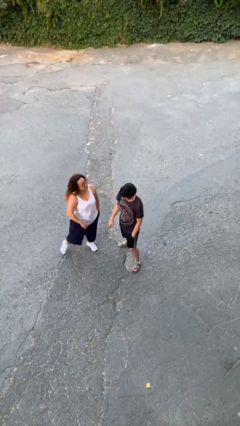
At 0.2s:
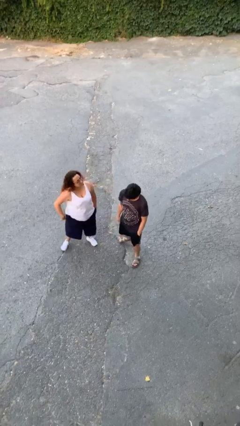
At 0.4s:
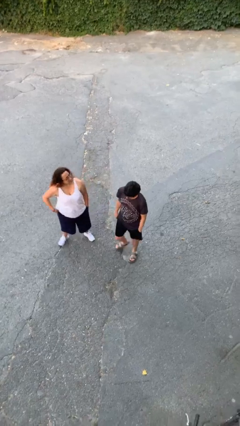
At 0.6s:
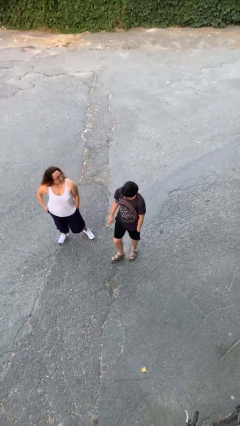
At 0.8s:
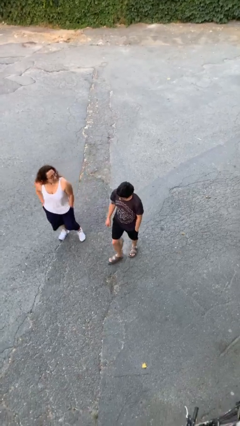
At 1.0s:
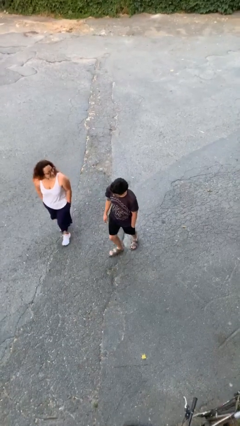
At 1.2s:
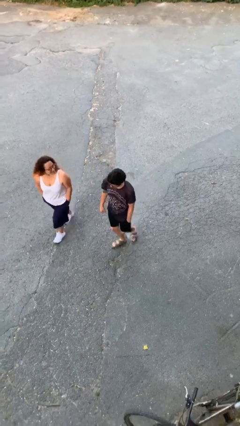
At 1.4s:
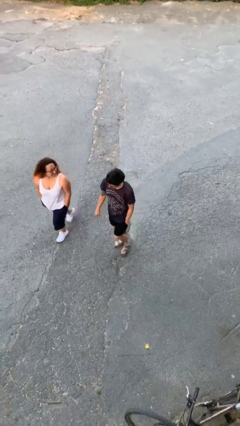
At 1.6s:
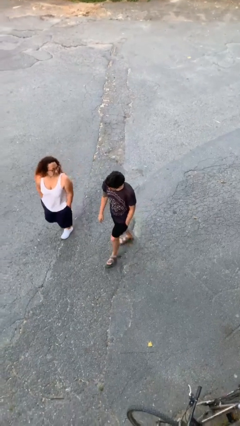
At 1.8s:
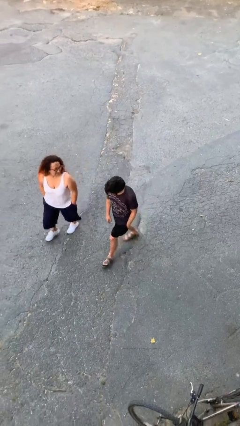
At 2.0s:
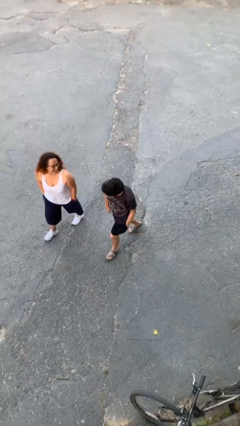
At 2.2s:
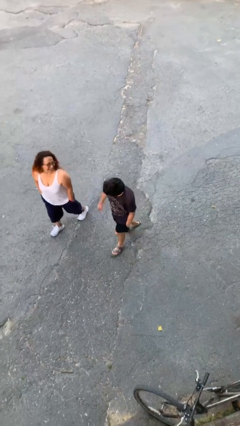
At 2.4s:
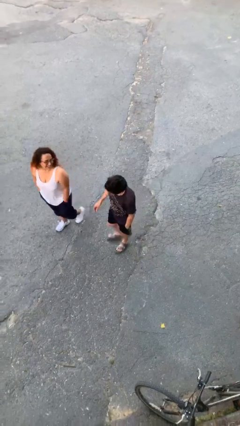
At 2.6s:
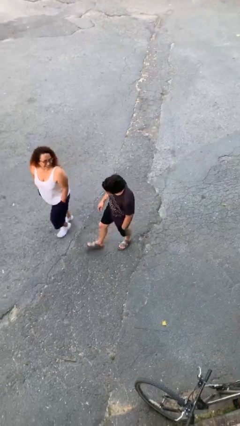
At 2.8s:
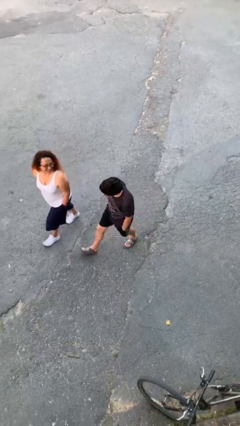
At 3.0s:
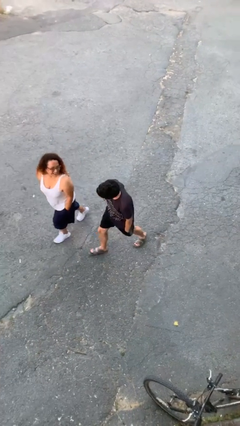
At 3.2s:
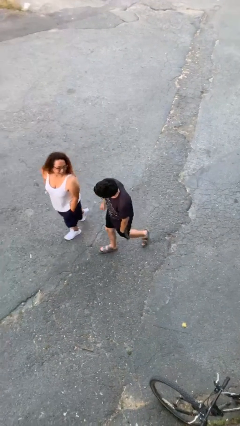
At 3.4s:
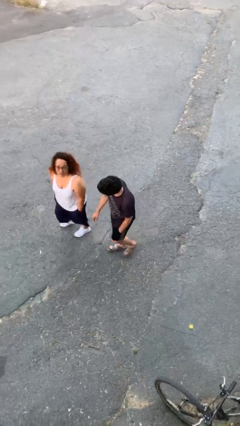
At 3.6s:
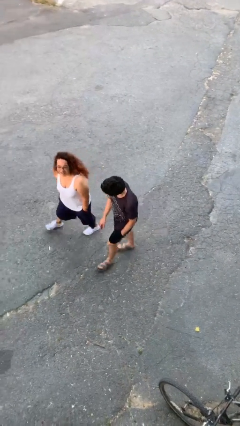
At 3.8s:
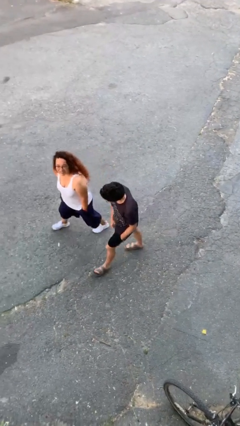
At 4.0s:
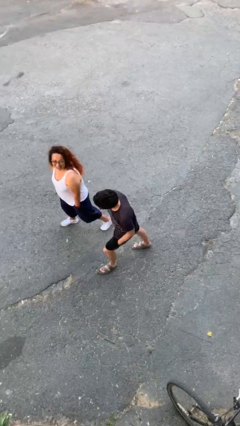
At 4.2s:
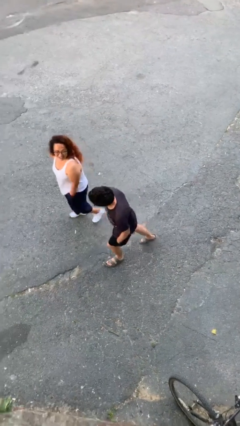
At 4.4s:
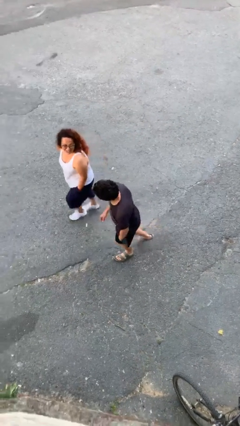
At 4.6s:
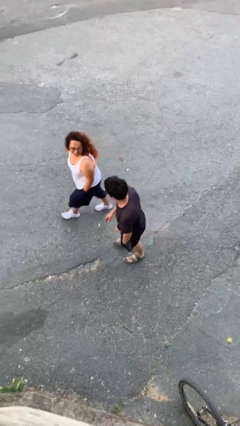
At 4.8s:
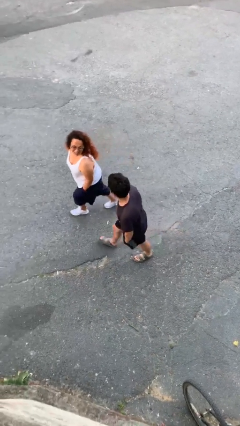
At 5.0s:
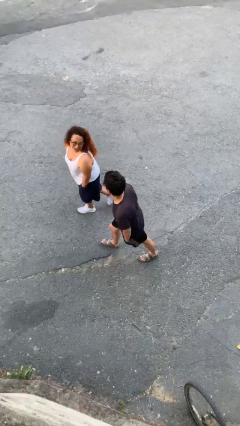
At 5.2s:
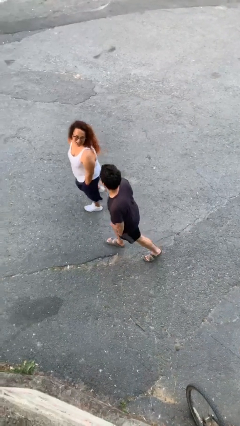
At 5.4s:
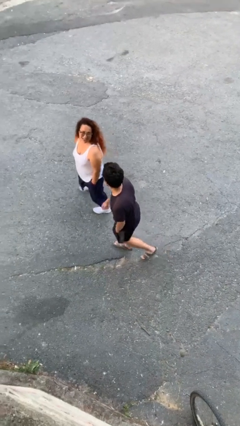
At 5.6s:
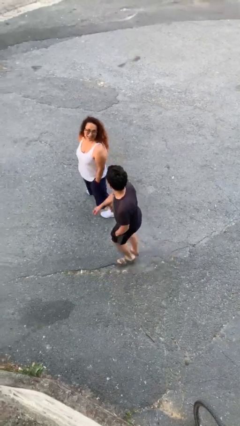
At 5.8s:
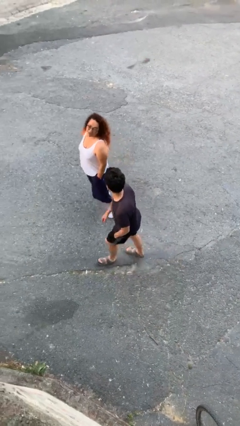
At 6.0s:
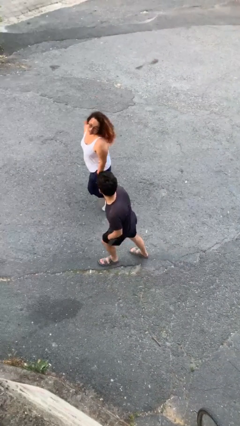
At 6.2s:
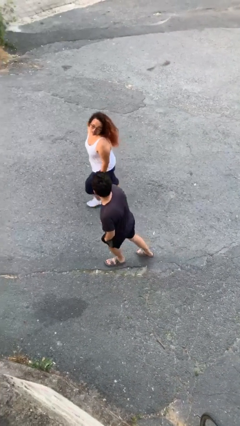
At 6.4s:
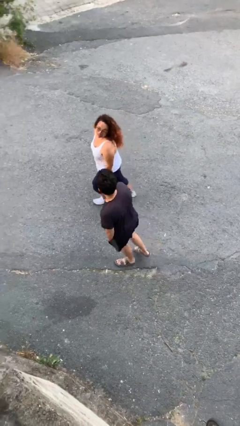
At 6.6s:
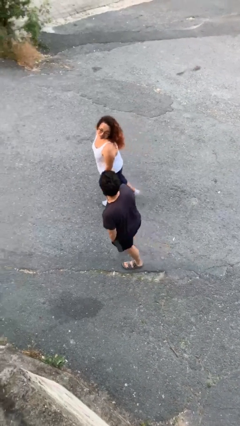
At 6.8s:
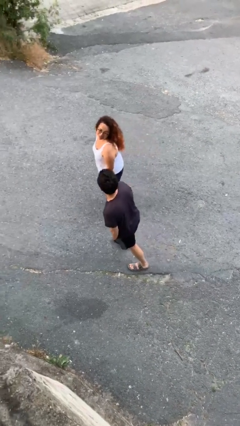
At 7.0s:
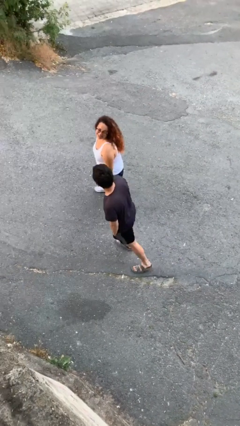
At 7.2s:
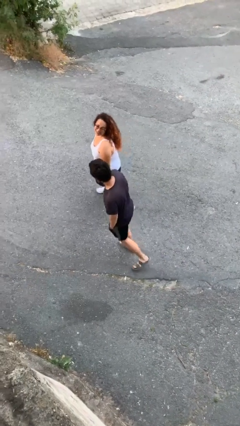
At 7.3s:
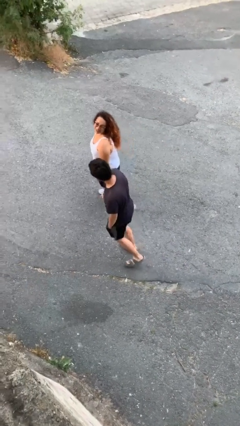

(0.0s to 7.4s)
person talks to person

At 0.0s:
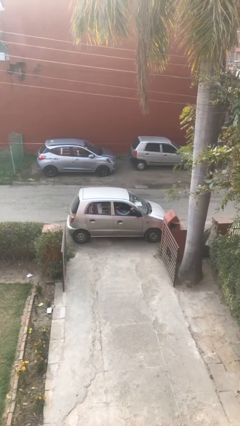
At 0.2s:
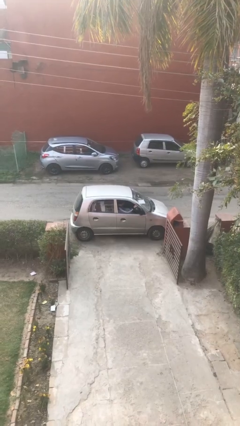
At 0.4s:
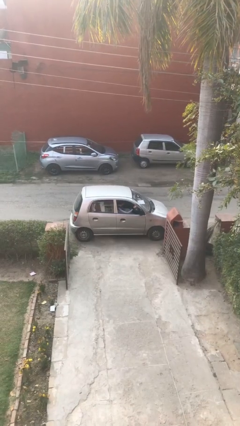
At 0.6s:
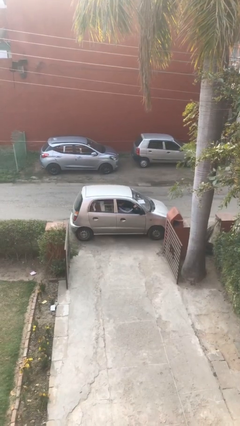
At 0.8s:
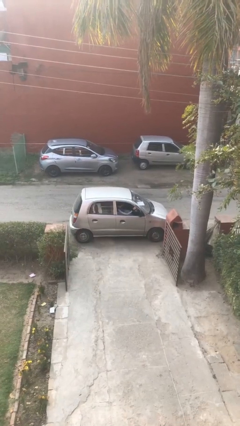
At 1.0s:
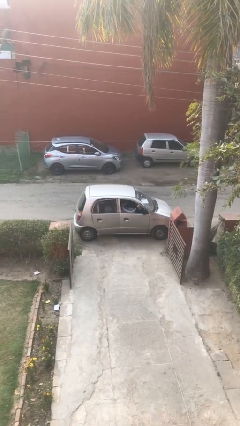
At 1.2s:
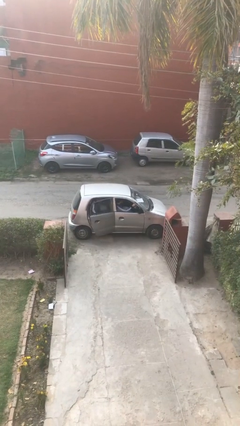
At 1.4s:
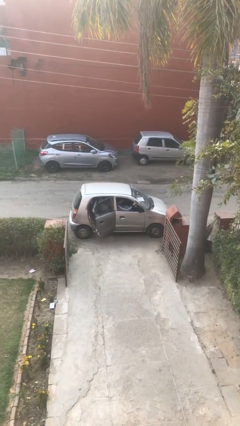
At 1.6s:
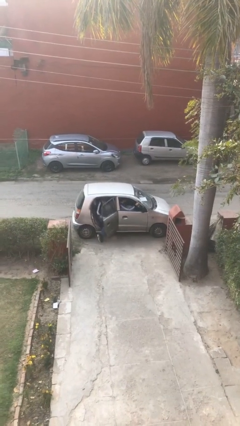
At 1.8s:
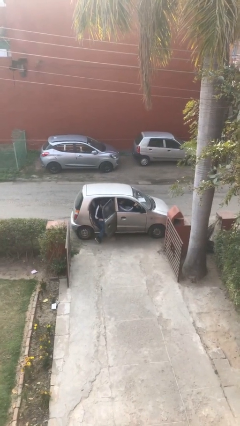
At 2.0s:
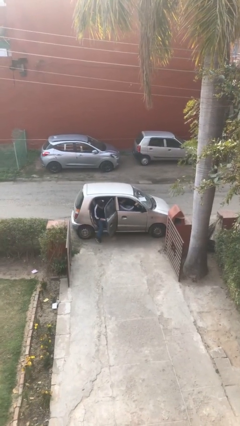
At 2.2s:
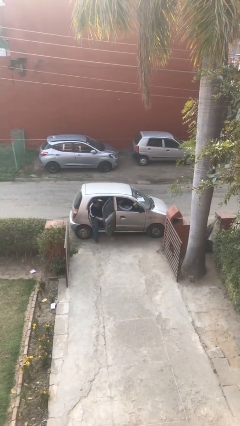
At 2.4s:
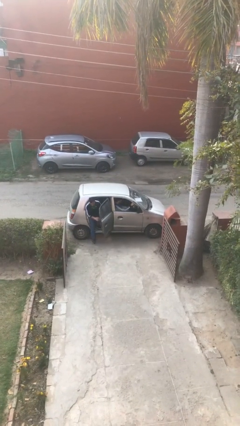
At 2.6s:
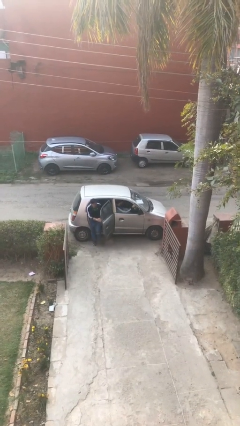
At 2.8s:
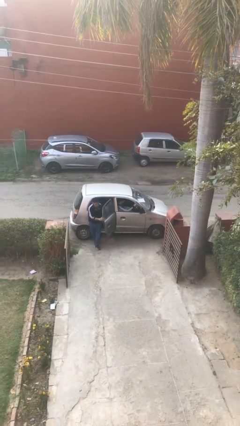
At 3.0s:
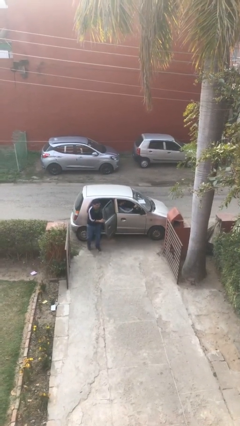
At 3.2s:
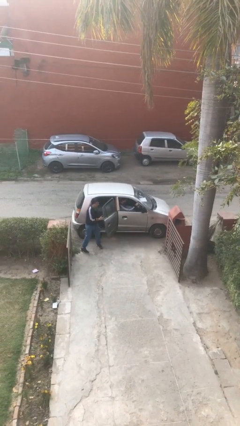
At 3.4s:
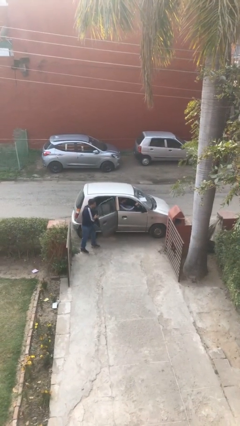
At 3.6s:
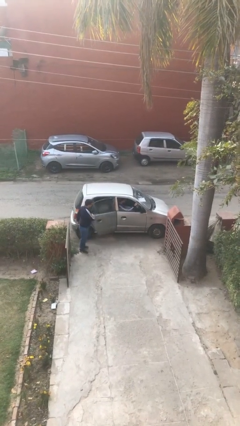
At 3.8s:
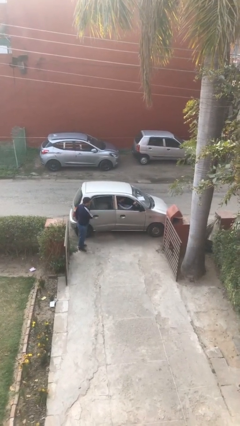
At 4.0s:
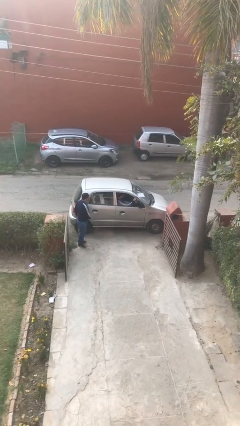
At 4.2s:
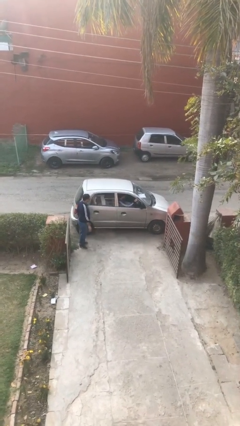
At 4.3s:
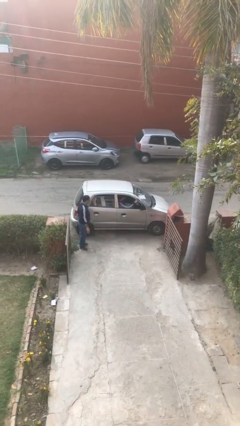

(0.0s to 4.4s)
car drops off person

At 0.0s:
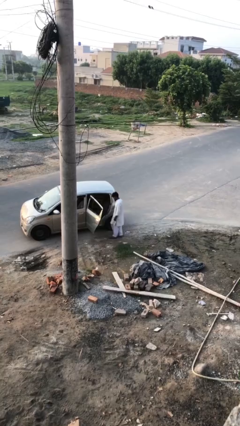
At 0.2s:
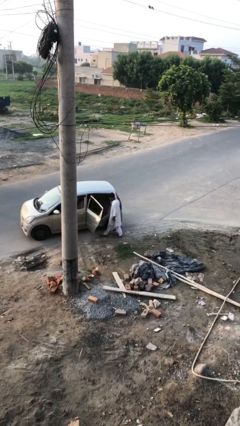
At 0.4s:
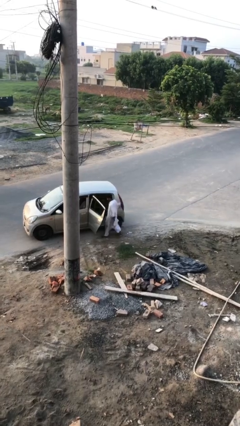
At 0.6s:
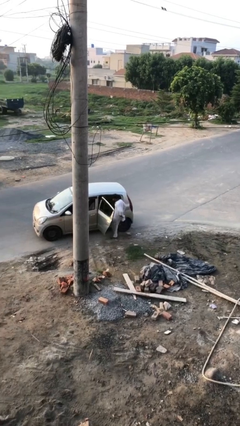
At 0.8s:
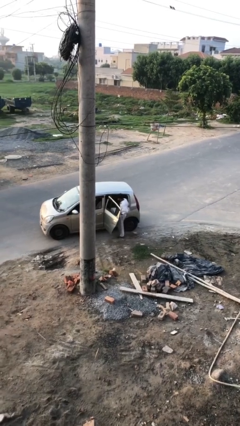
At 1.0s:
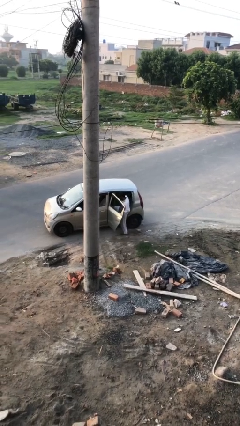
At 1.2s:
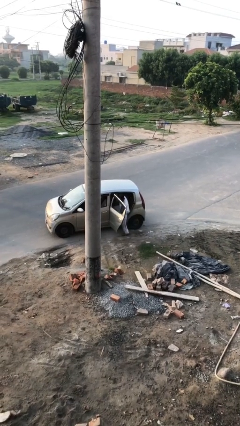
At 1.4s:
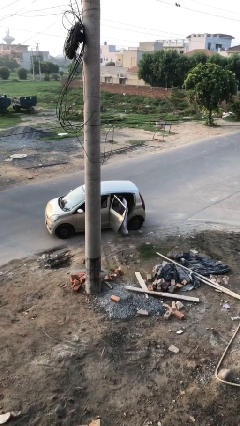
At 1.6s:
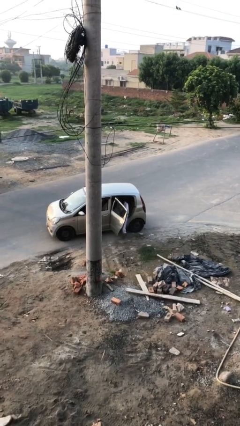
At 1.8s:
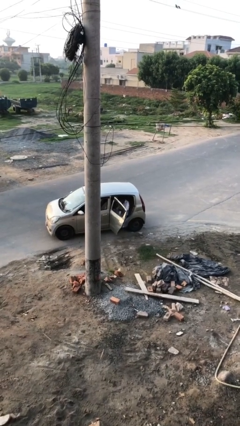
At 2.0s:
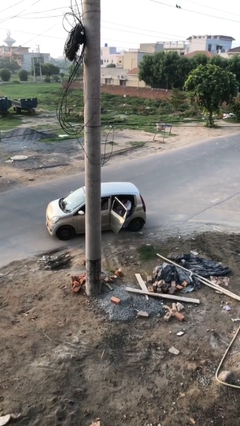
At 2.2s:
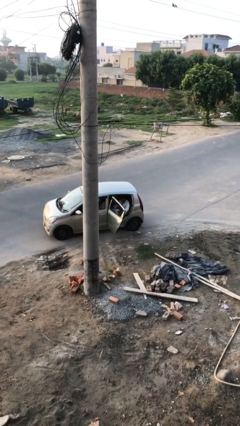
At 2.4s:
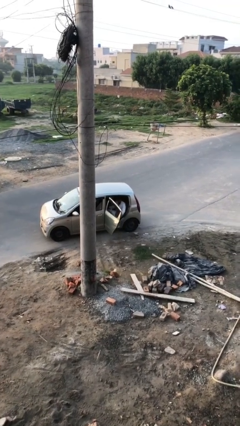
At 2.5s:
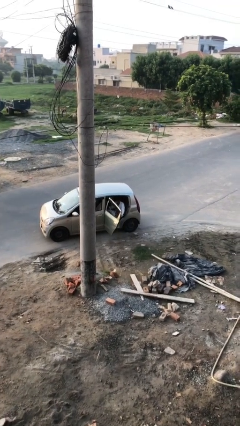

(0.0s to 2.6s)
person enters car

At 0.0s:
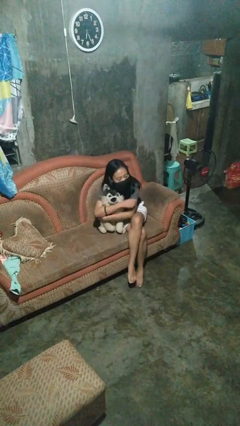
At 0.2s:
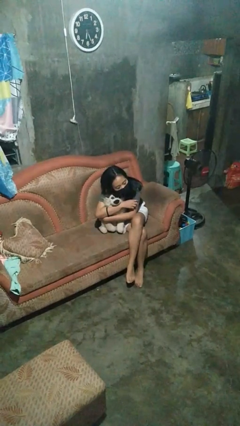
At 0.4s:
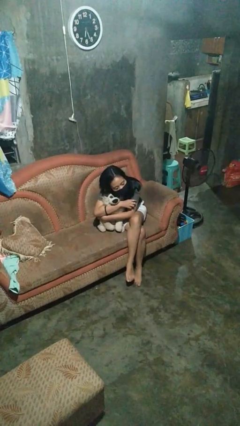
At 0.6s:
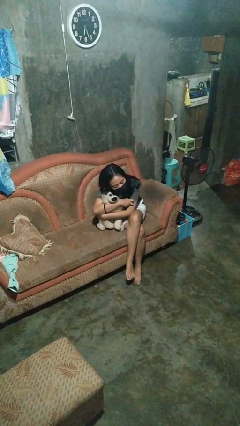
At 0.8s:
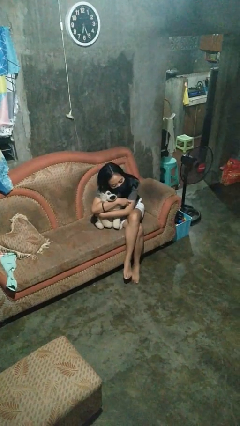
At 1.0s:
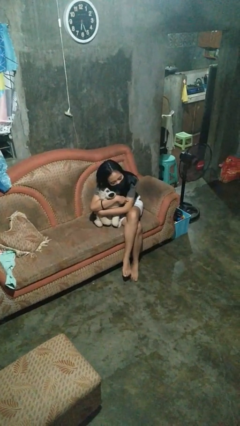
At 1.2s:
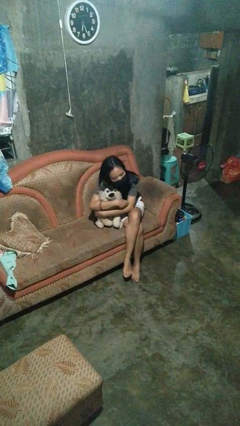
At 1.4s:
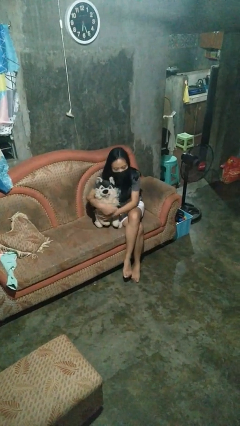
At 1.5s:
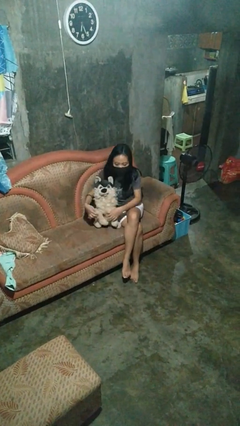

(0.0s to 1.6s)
person hugs stuffed animal

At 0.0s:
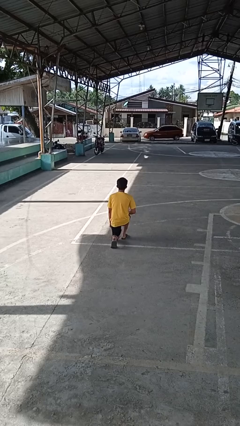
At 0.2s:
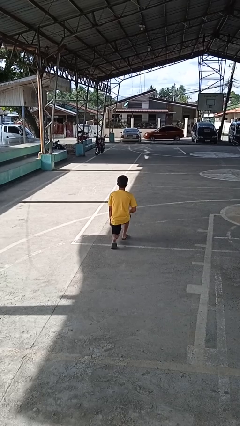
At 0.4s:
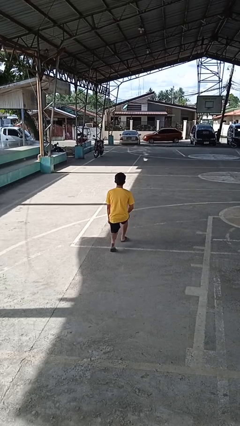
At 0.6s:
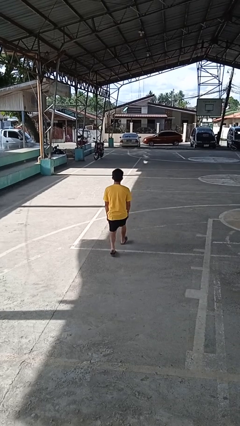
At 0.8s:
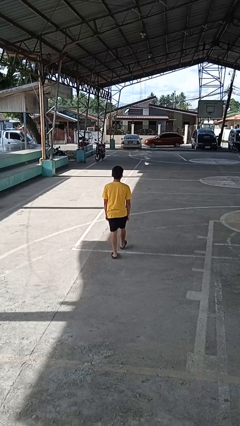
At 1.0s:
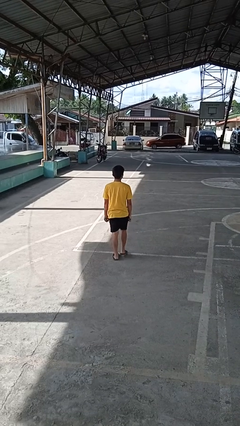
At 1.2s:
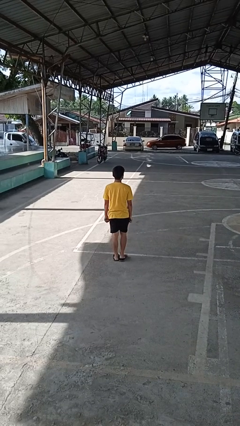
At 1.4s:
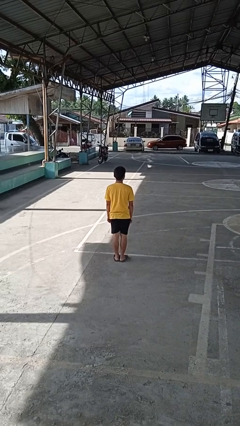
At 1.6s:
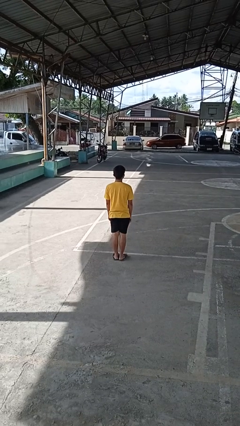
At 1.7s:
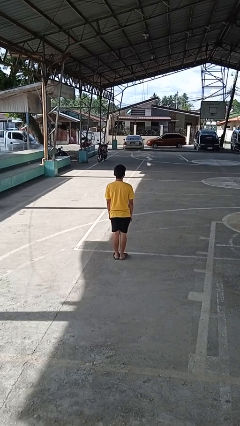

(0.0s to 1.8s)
person stands up from floor
